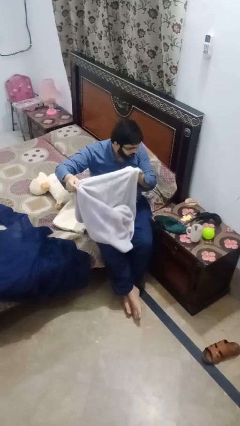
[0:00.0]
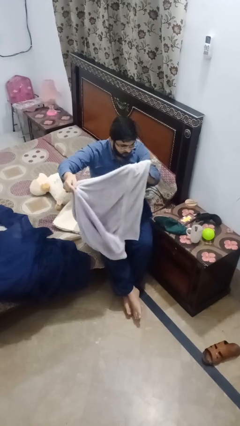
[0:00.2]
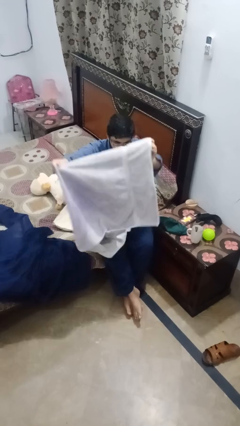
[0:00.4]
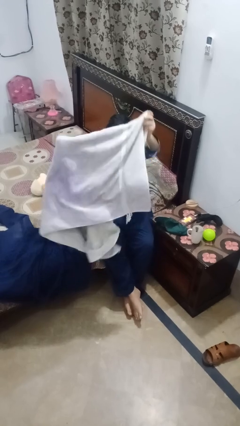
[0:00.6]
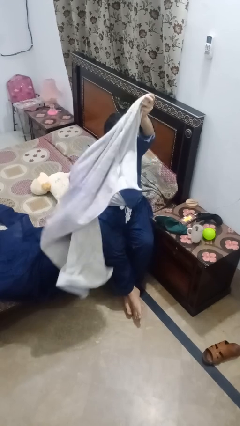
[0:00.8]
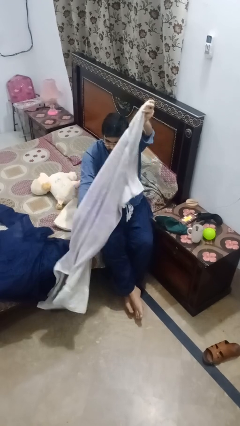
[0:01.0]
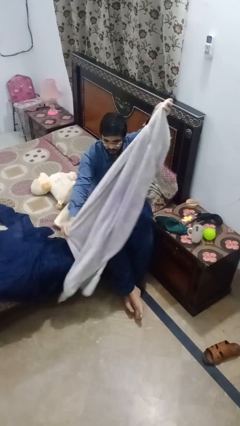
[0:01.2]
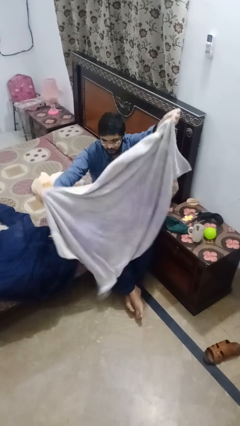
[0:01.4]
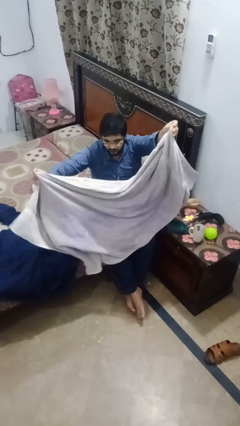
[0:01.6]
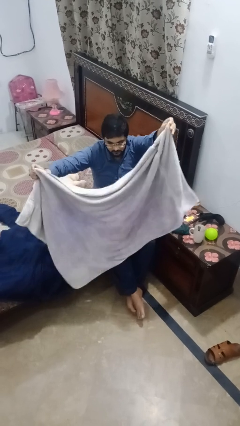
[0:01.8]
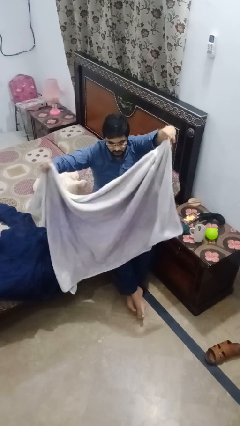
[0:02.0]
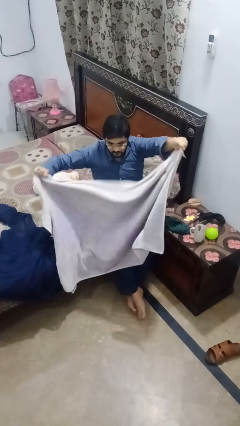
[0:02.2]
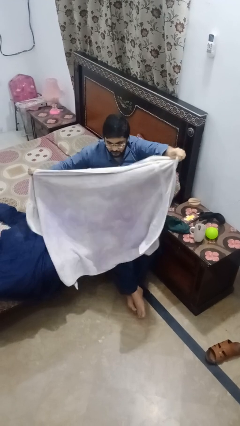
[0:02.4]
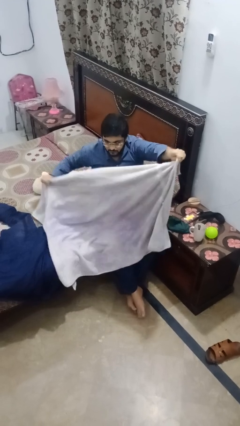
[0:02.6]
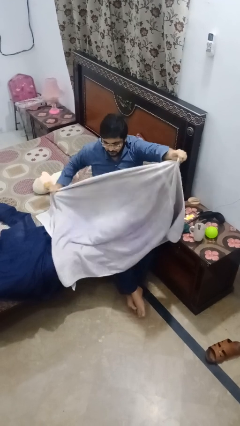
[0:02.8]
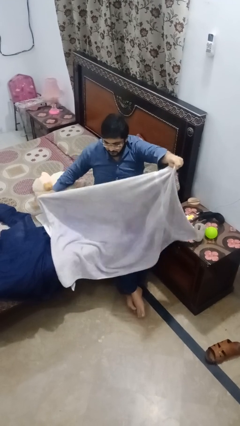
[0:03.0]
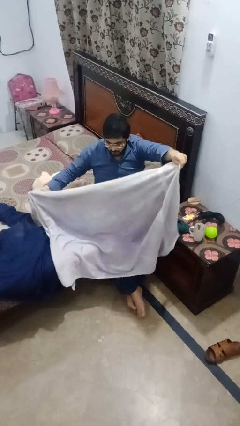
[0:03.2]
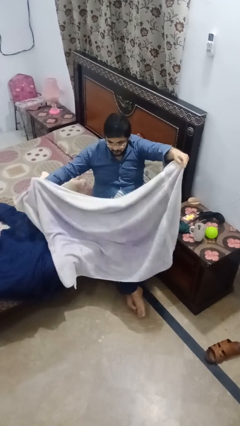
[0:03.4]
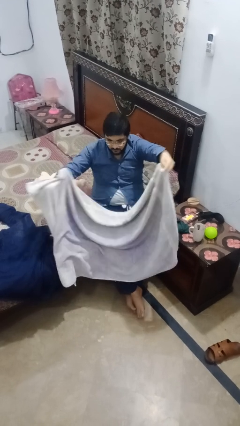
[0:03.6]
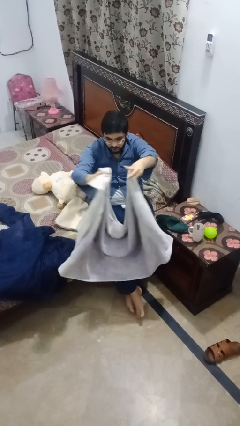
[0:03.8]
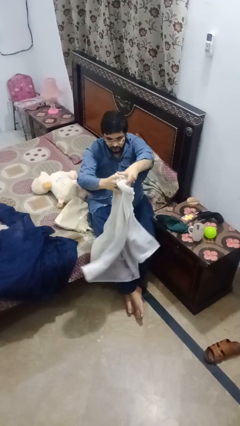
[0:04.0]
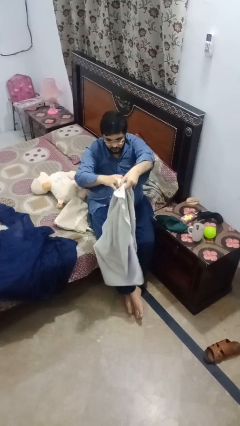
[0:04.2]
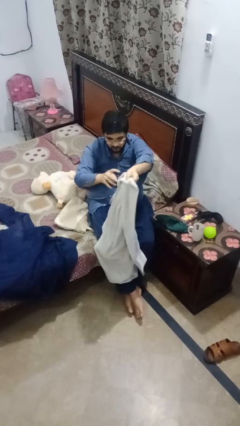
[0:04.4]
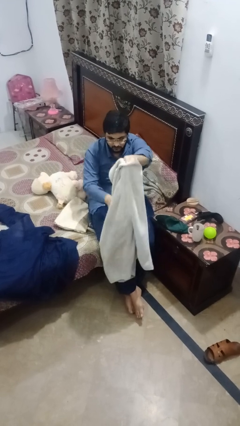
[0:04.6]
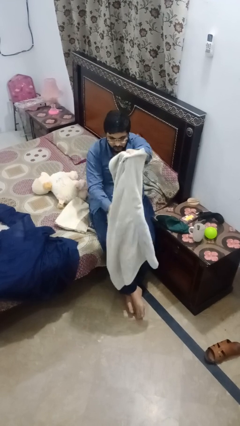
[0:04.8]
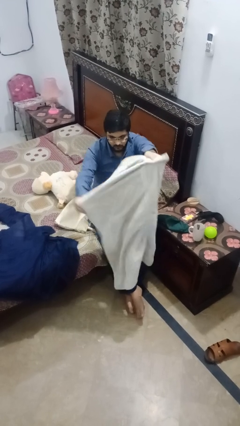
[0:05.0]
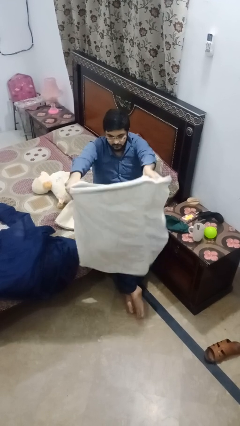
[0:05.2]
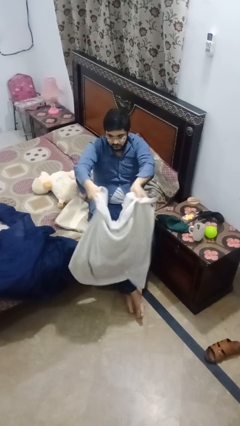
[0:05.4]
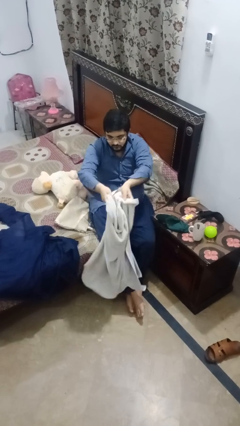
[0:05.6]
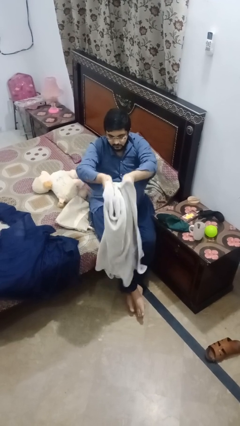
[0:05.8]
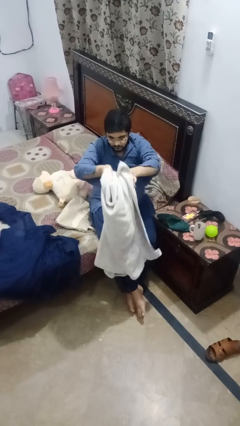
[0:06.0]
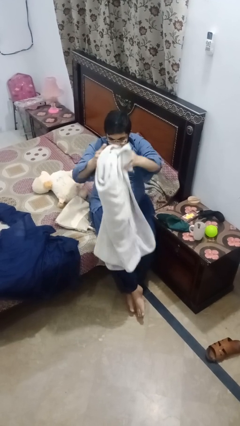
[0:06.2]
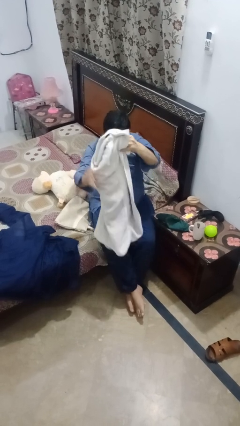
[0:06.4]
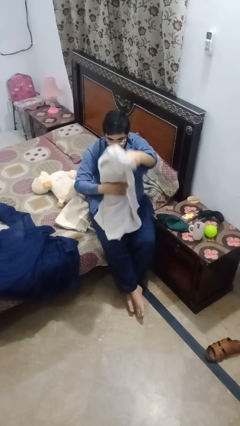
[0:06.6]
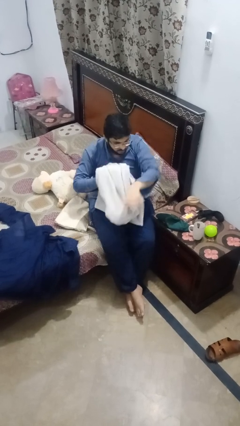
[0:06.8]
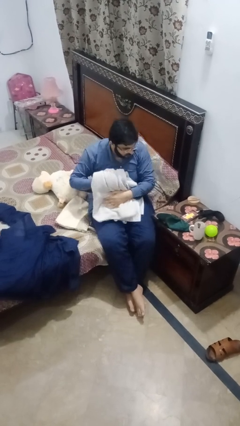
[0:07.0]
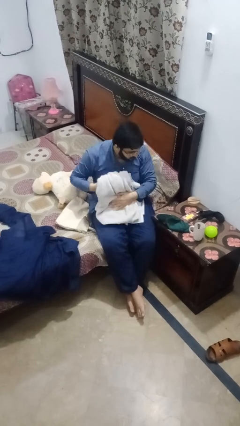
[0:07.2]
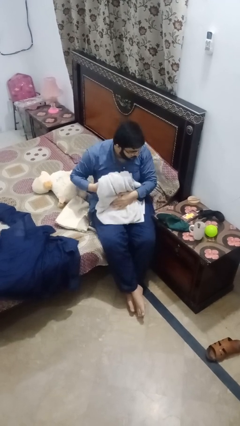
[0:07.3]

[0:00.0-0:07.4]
person folds towel

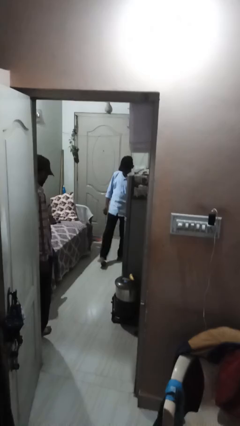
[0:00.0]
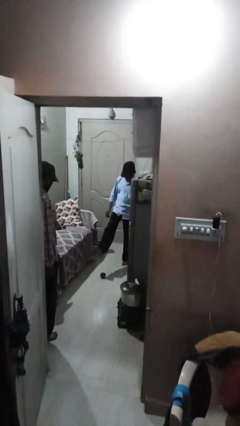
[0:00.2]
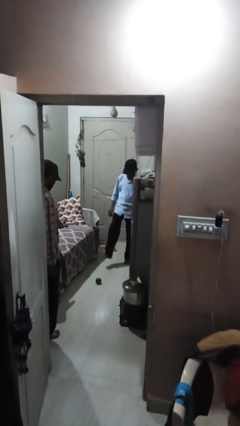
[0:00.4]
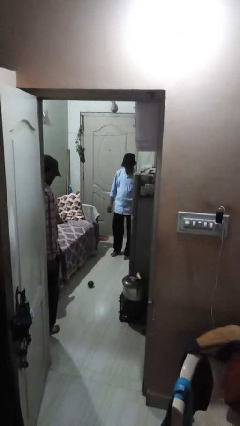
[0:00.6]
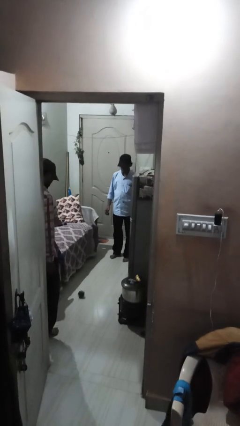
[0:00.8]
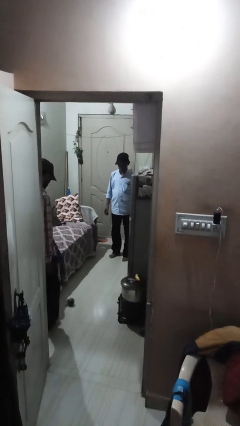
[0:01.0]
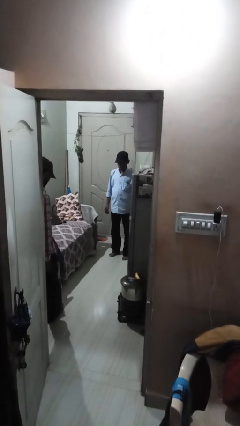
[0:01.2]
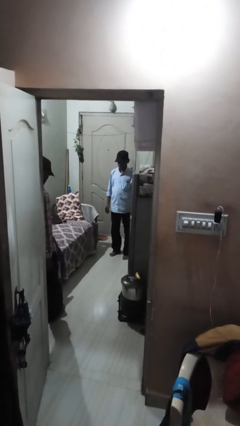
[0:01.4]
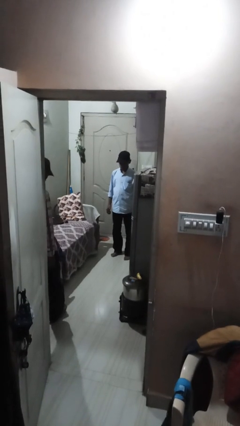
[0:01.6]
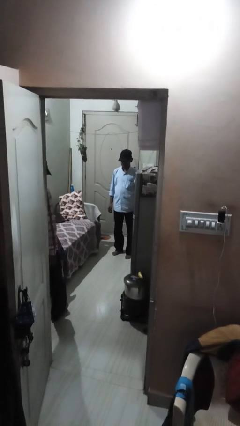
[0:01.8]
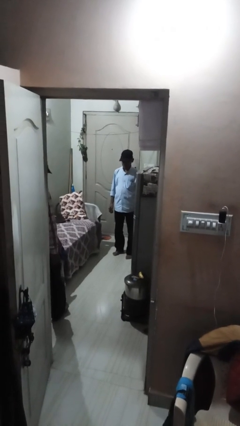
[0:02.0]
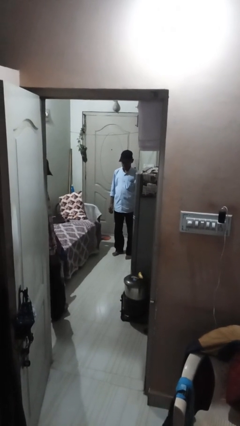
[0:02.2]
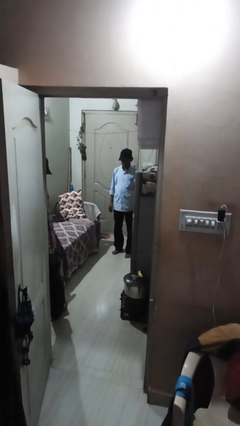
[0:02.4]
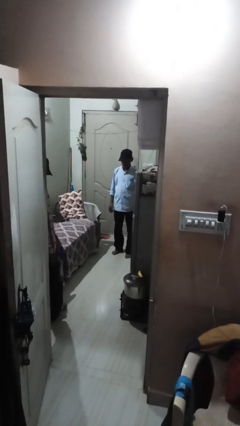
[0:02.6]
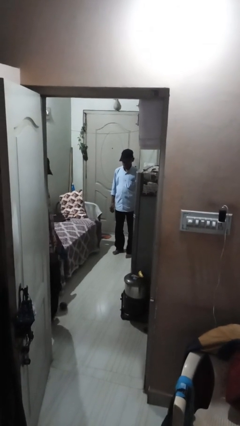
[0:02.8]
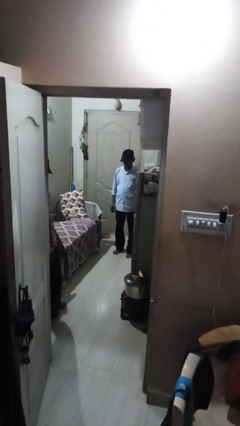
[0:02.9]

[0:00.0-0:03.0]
person kicks object to person

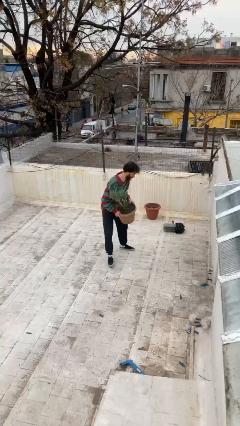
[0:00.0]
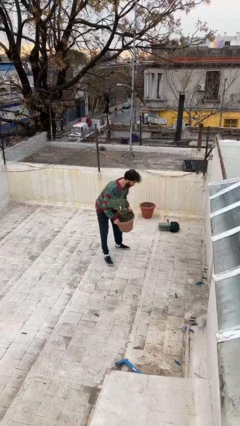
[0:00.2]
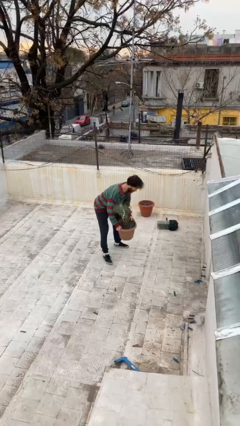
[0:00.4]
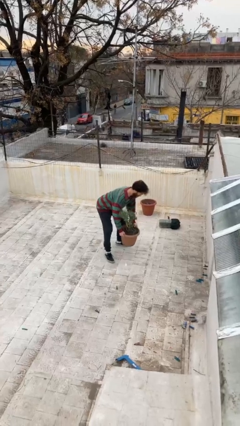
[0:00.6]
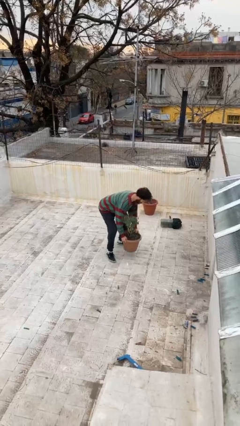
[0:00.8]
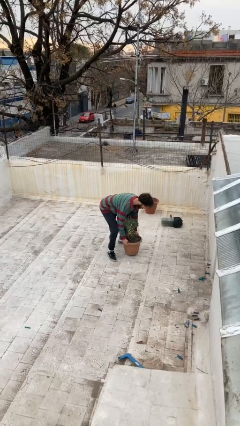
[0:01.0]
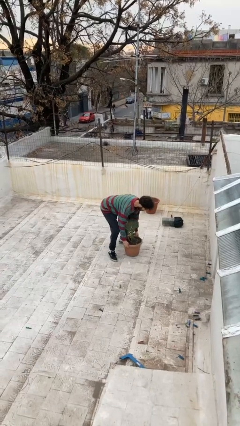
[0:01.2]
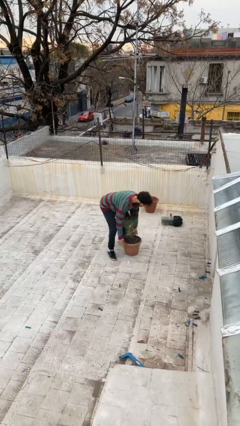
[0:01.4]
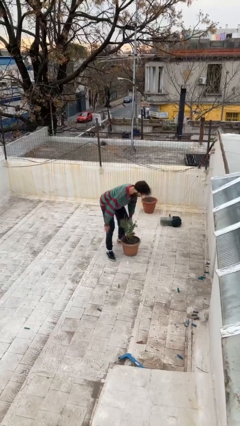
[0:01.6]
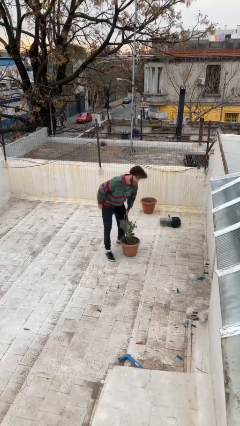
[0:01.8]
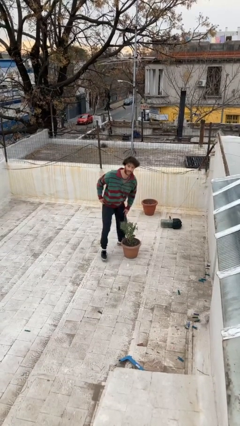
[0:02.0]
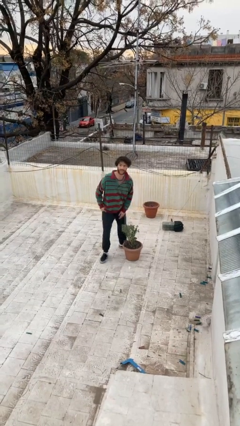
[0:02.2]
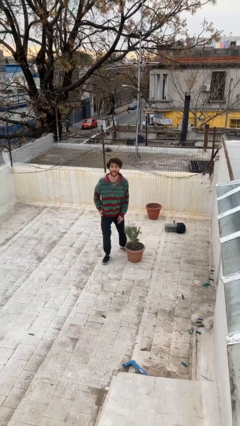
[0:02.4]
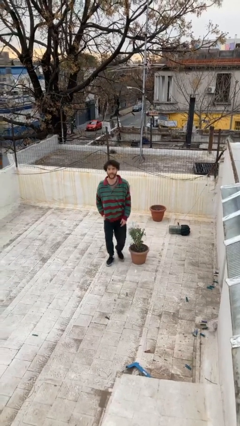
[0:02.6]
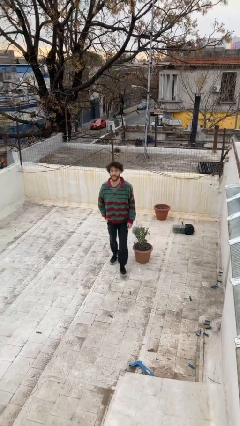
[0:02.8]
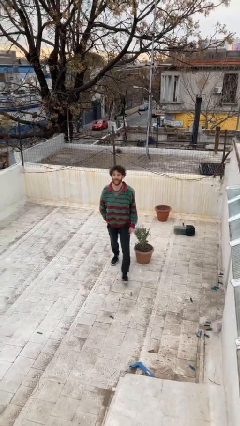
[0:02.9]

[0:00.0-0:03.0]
person puts down object on floor

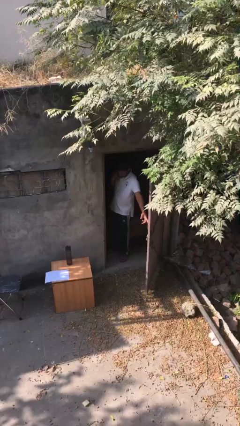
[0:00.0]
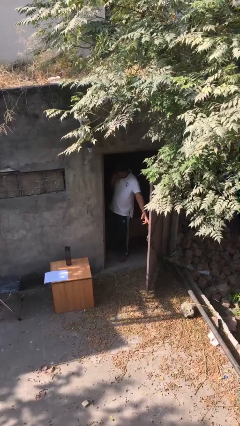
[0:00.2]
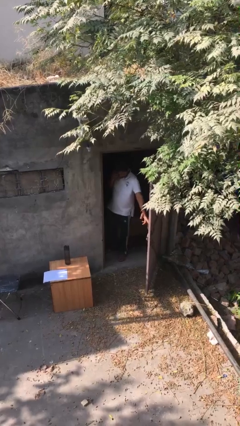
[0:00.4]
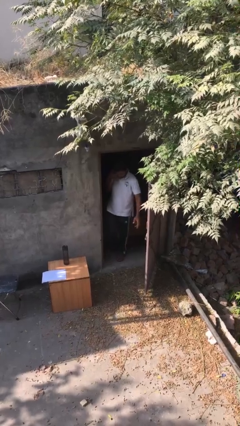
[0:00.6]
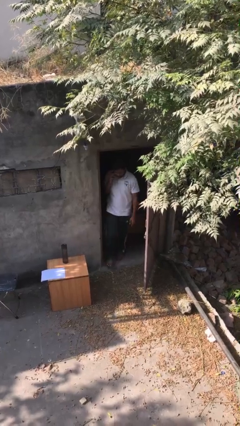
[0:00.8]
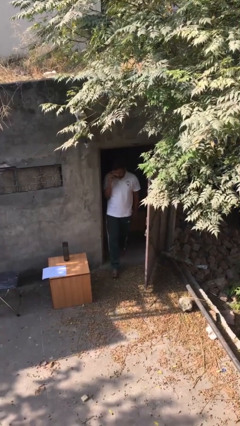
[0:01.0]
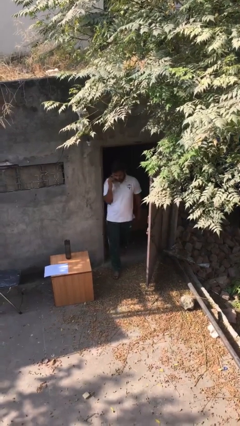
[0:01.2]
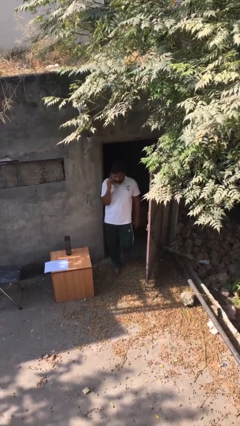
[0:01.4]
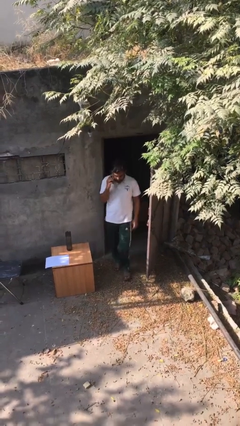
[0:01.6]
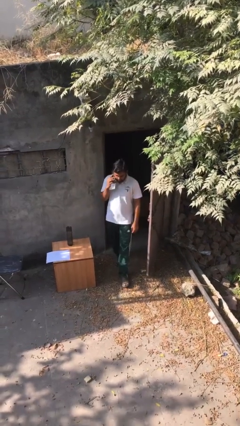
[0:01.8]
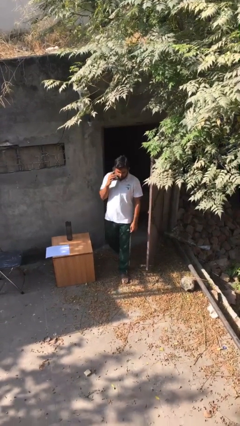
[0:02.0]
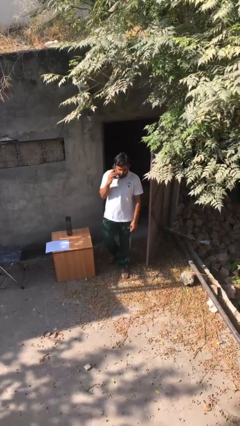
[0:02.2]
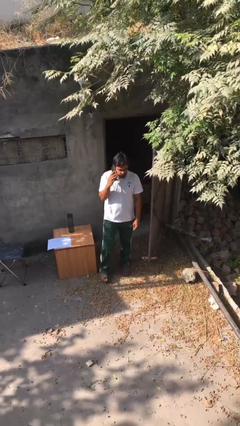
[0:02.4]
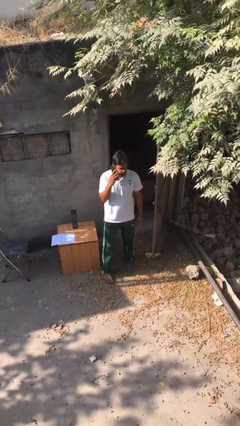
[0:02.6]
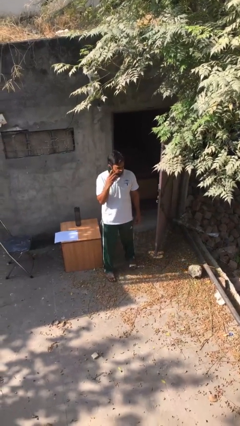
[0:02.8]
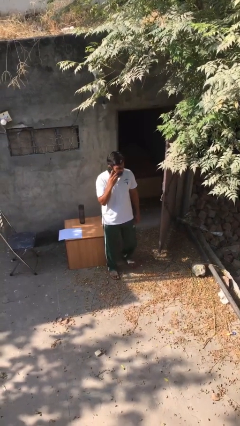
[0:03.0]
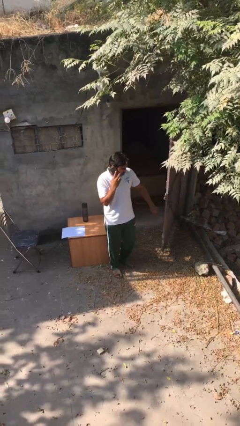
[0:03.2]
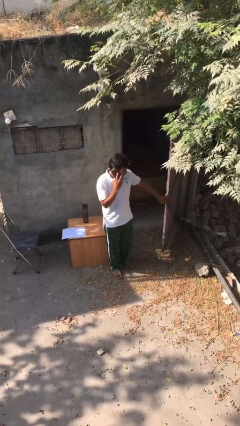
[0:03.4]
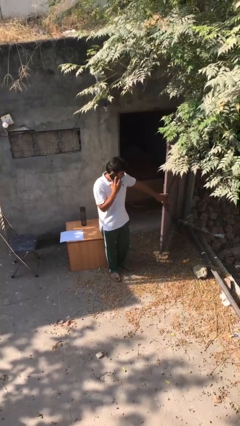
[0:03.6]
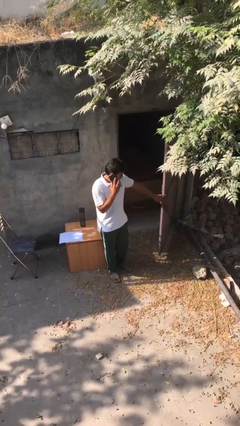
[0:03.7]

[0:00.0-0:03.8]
person enters scene through structure

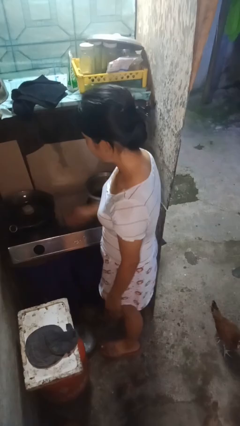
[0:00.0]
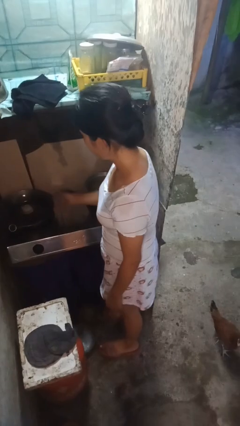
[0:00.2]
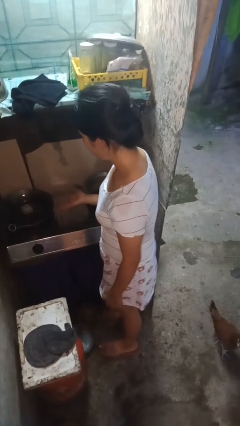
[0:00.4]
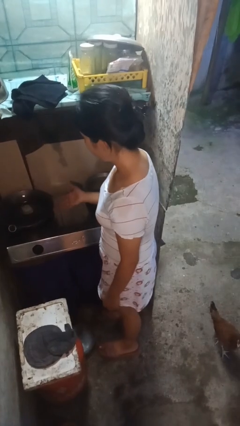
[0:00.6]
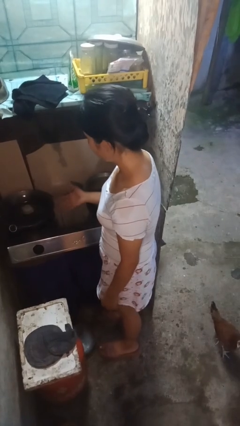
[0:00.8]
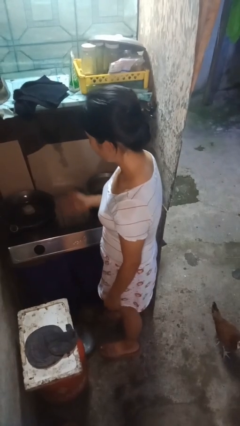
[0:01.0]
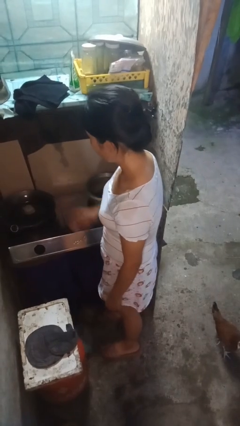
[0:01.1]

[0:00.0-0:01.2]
person burns hand
